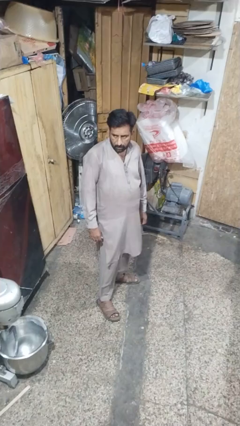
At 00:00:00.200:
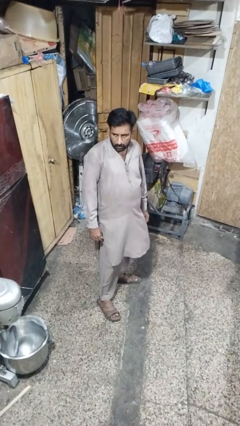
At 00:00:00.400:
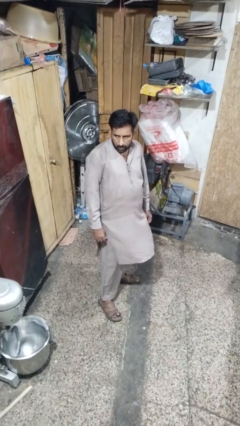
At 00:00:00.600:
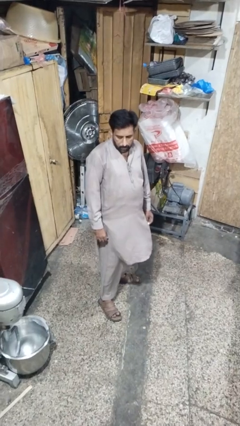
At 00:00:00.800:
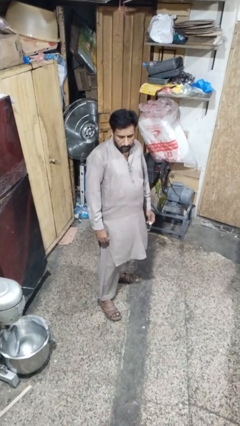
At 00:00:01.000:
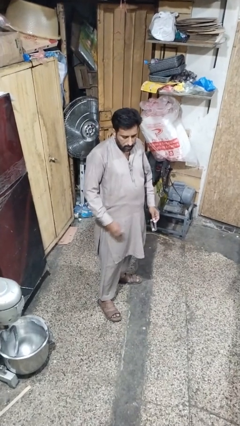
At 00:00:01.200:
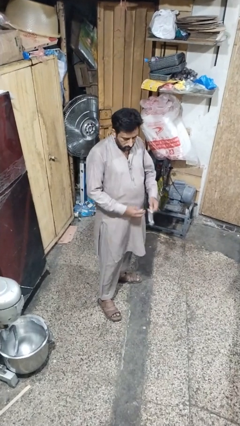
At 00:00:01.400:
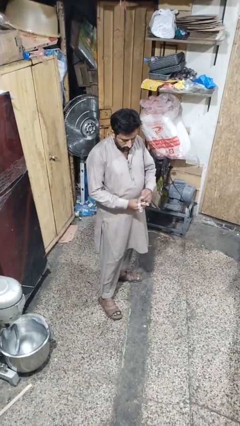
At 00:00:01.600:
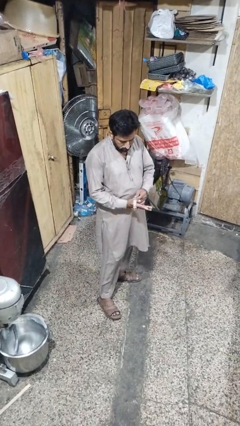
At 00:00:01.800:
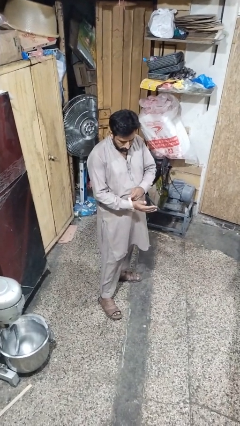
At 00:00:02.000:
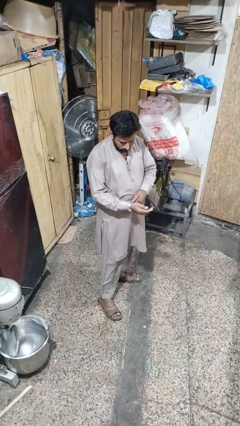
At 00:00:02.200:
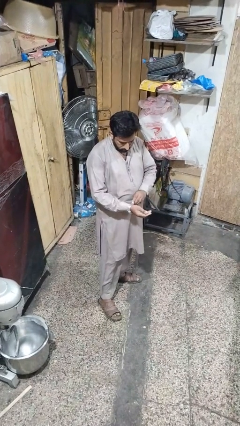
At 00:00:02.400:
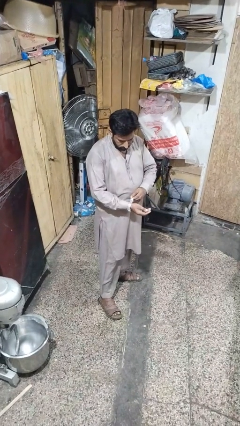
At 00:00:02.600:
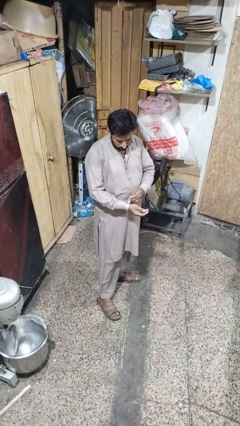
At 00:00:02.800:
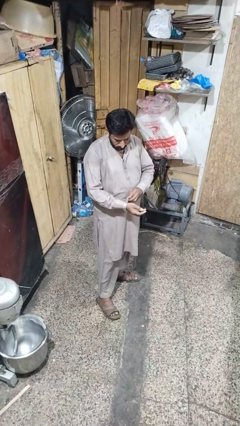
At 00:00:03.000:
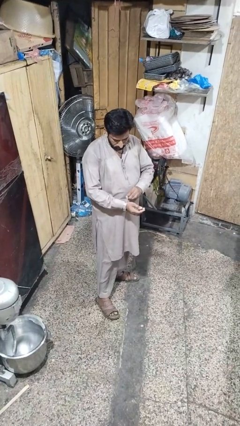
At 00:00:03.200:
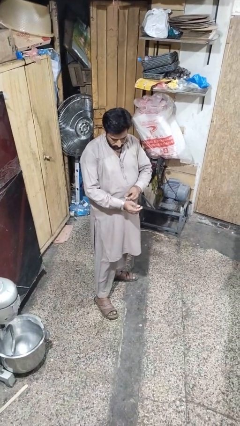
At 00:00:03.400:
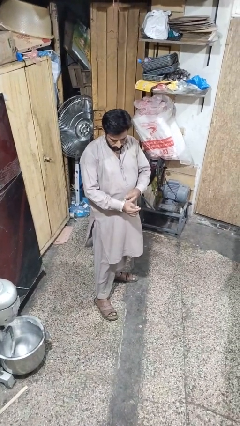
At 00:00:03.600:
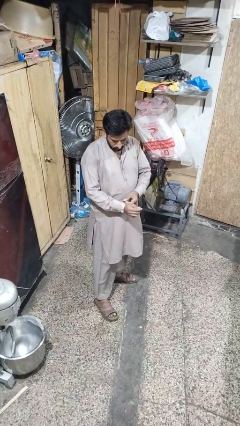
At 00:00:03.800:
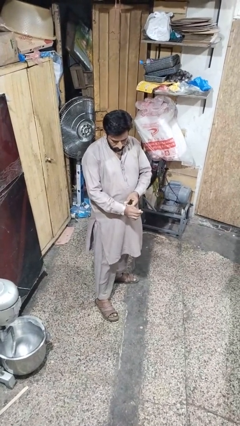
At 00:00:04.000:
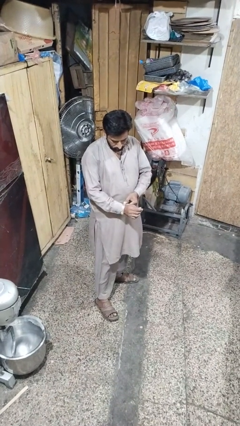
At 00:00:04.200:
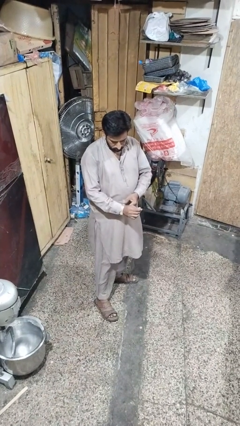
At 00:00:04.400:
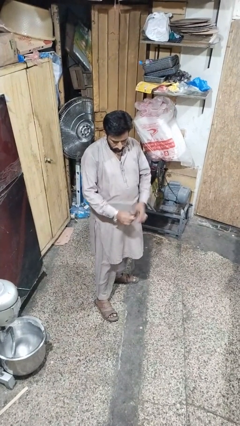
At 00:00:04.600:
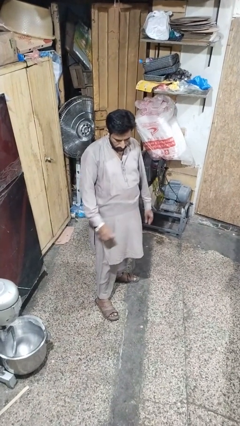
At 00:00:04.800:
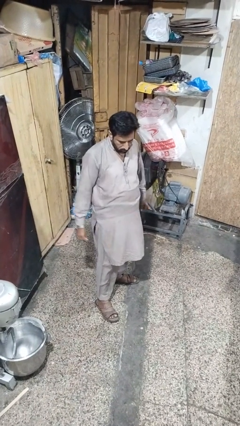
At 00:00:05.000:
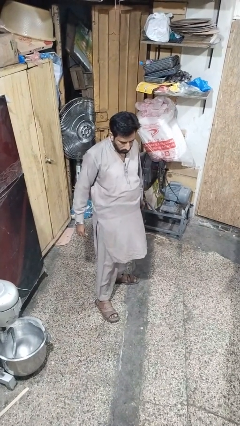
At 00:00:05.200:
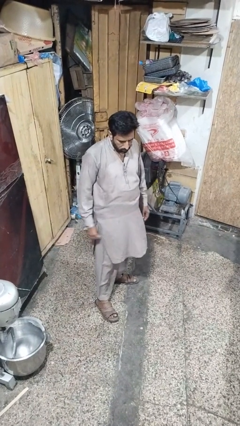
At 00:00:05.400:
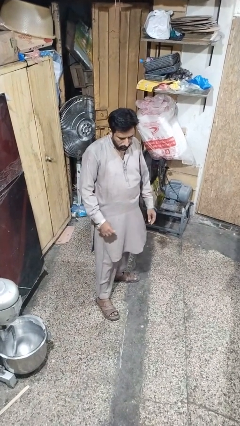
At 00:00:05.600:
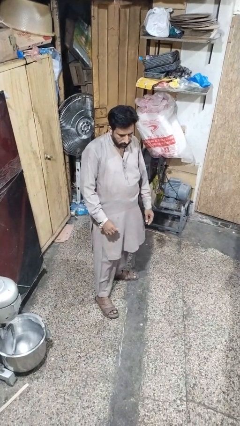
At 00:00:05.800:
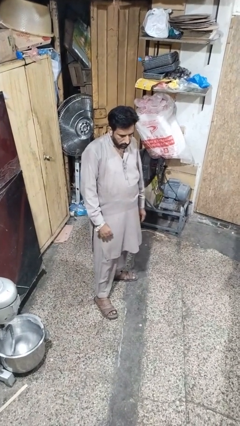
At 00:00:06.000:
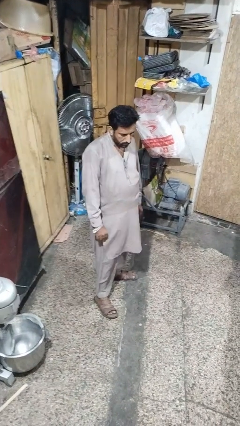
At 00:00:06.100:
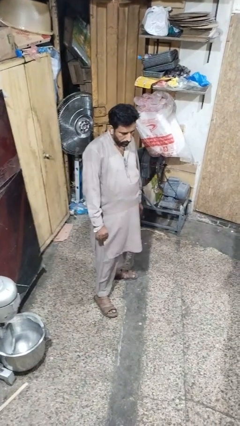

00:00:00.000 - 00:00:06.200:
person puts on wristwatch

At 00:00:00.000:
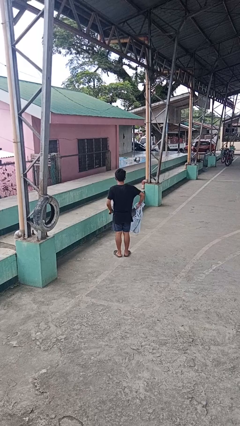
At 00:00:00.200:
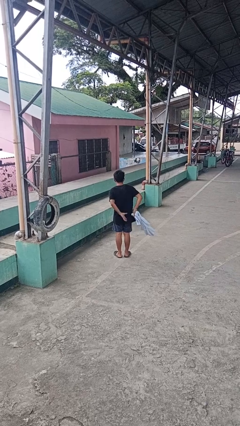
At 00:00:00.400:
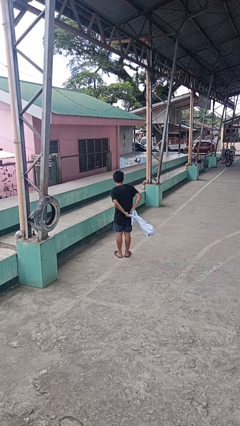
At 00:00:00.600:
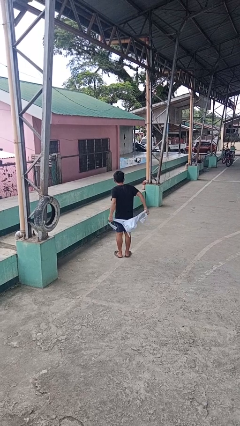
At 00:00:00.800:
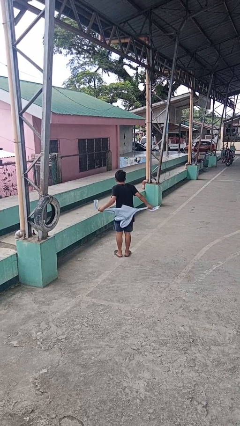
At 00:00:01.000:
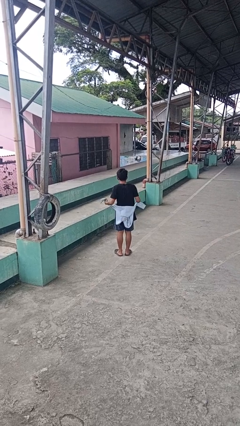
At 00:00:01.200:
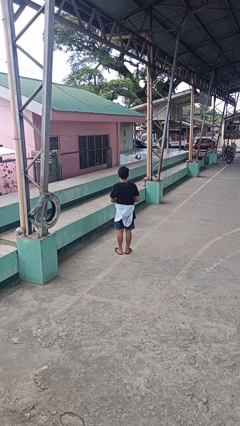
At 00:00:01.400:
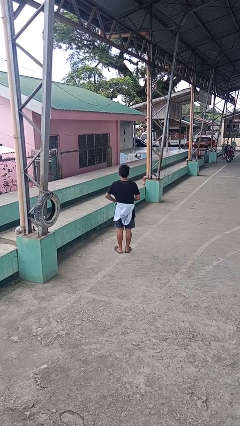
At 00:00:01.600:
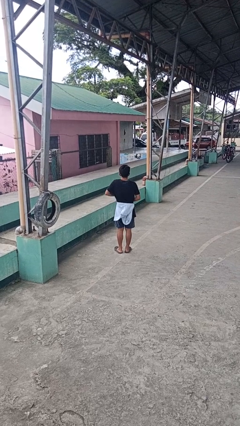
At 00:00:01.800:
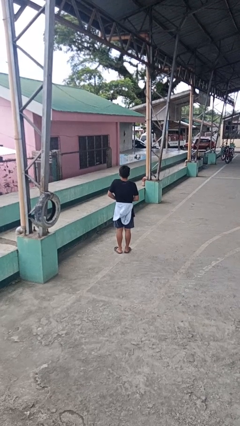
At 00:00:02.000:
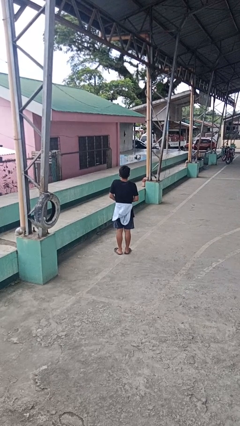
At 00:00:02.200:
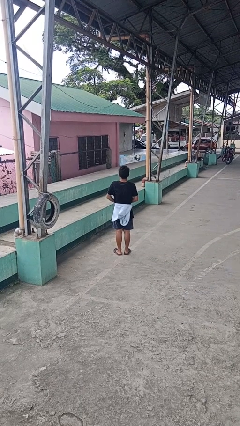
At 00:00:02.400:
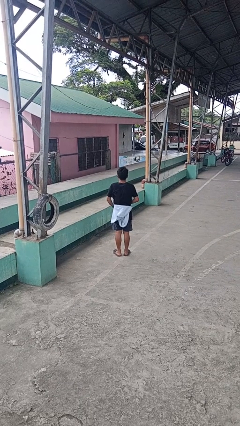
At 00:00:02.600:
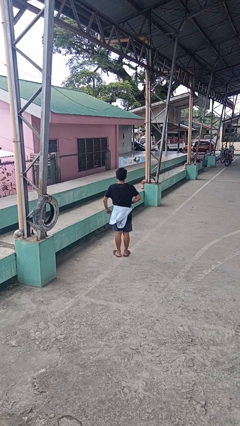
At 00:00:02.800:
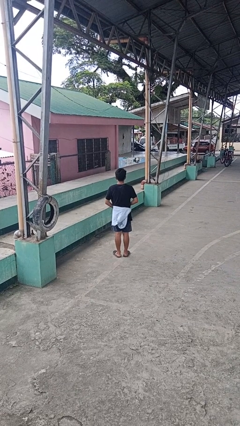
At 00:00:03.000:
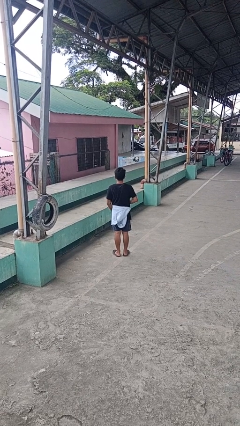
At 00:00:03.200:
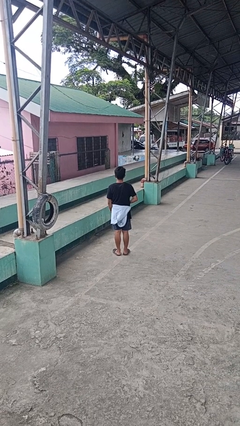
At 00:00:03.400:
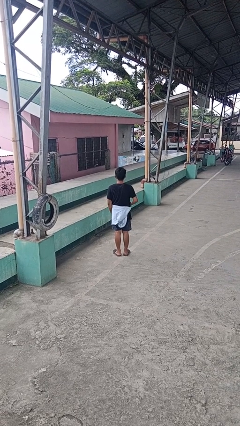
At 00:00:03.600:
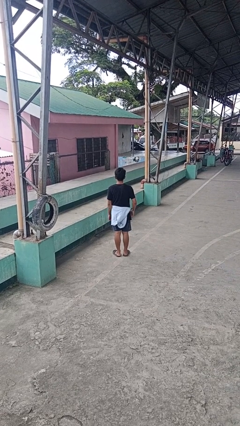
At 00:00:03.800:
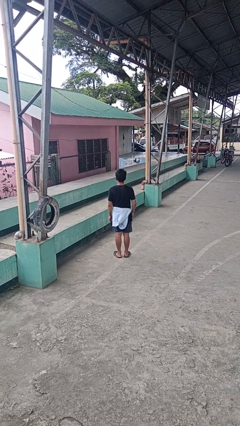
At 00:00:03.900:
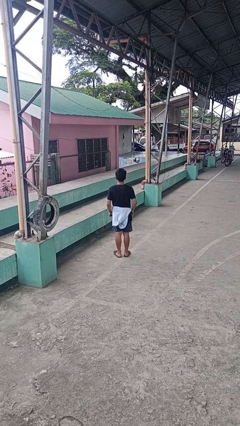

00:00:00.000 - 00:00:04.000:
person ties jacket around waist

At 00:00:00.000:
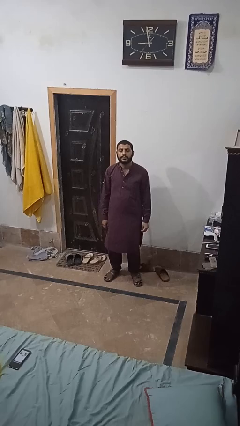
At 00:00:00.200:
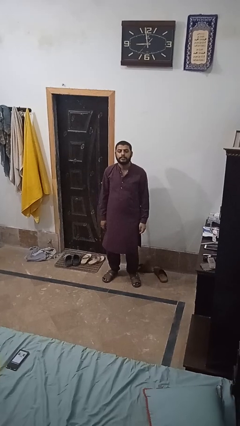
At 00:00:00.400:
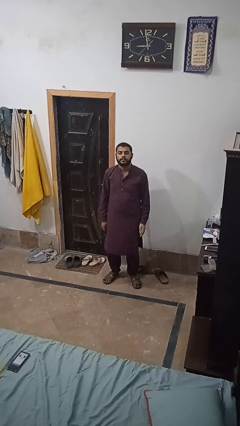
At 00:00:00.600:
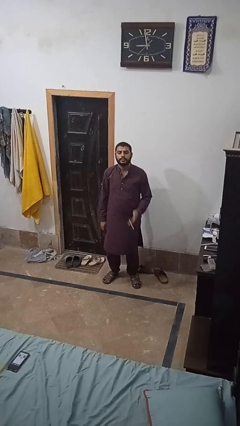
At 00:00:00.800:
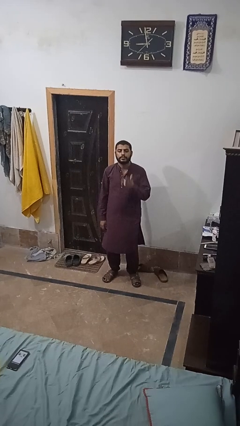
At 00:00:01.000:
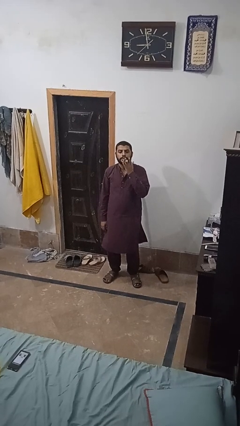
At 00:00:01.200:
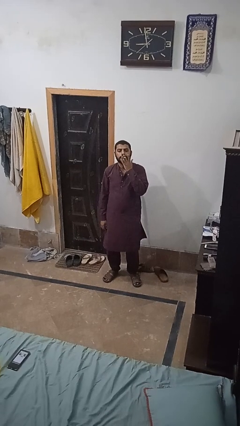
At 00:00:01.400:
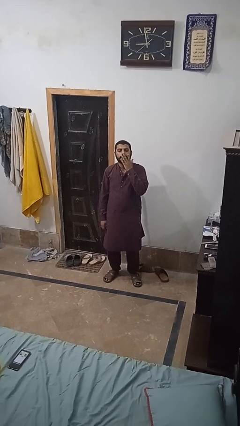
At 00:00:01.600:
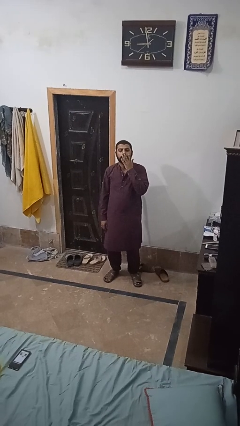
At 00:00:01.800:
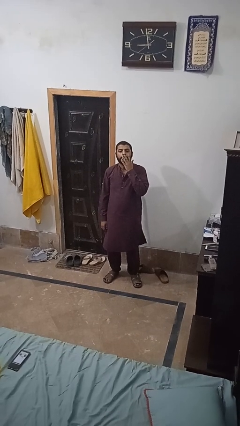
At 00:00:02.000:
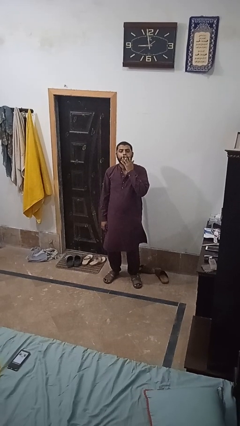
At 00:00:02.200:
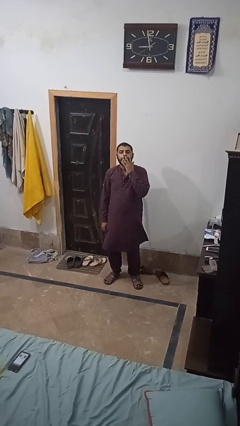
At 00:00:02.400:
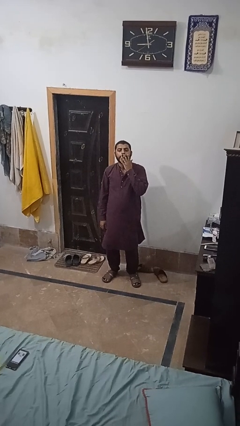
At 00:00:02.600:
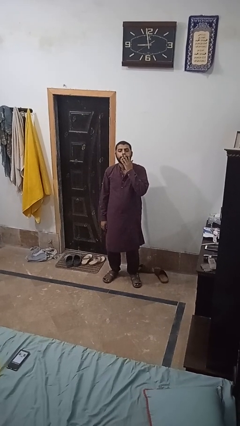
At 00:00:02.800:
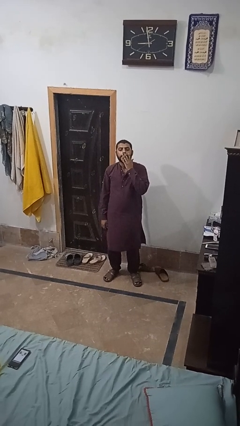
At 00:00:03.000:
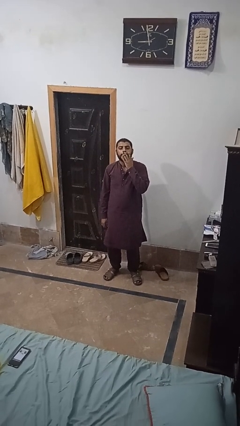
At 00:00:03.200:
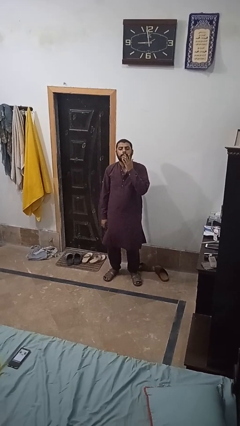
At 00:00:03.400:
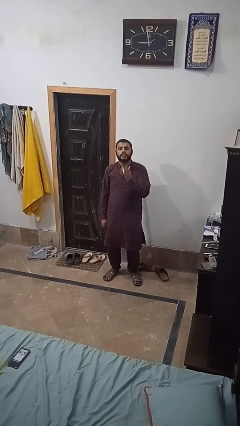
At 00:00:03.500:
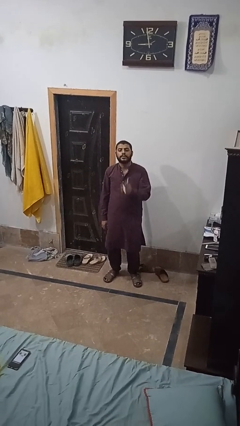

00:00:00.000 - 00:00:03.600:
person vapes

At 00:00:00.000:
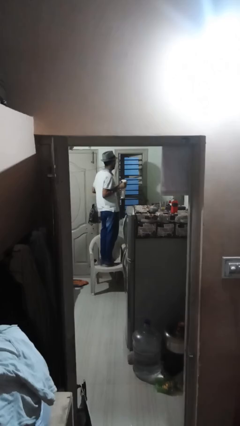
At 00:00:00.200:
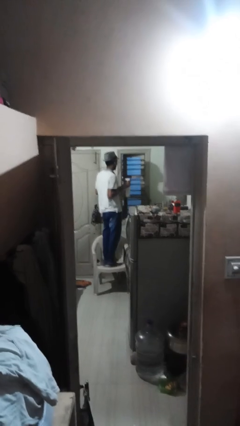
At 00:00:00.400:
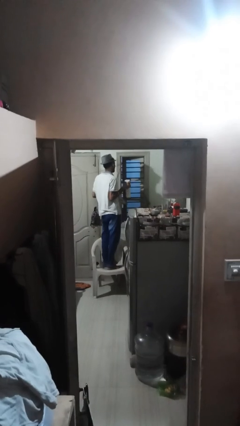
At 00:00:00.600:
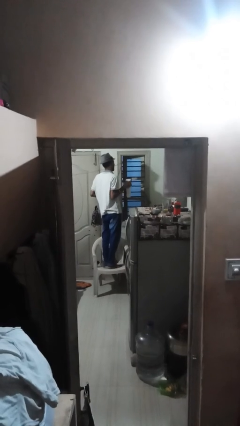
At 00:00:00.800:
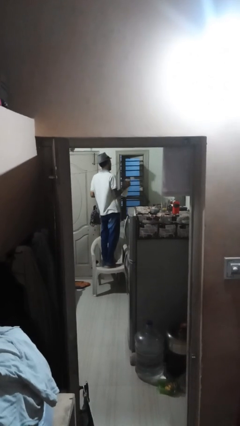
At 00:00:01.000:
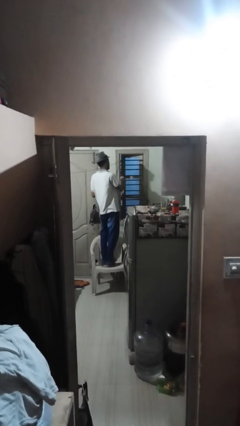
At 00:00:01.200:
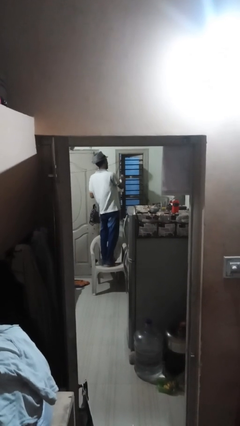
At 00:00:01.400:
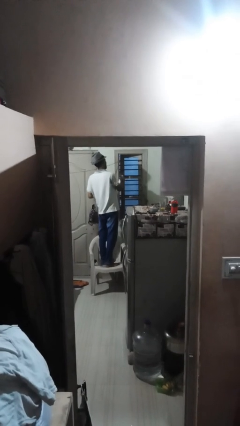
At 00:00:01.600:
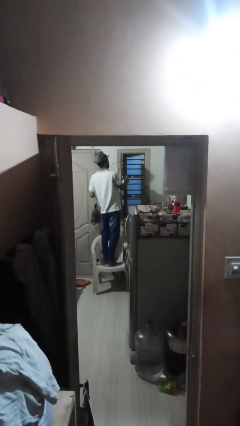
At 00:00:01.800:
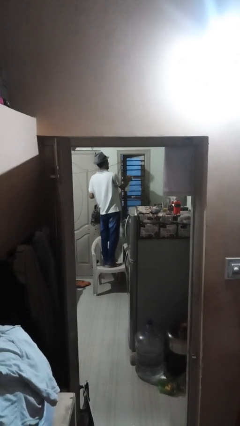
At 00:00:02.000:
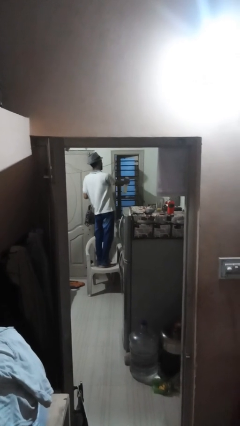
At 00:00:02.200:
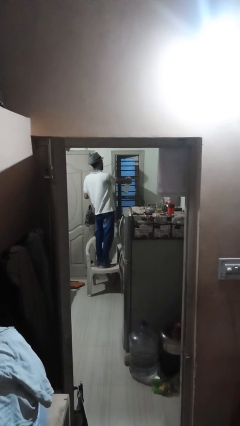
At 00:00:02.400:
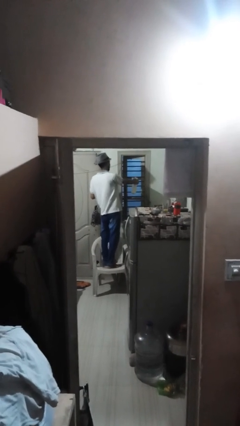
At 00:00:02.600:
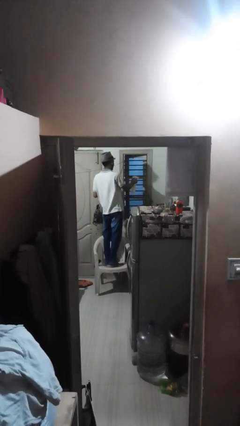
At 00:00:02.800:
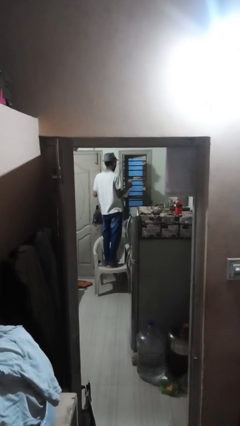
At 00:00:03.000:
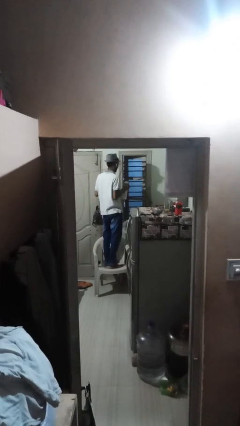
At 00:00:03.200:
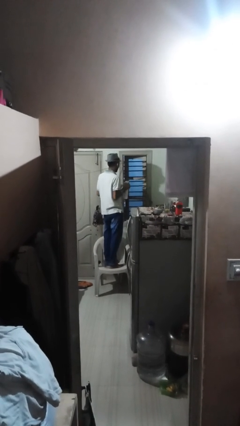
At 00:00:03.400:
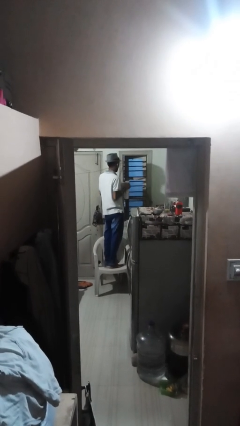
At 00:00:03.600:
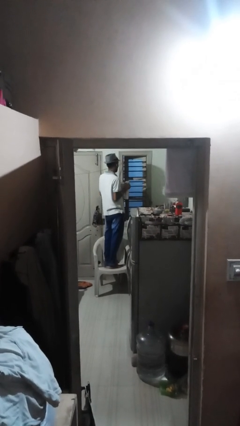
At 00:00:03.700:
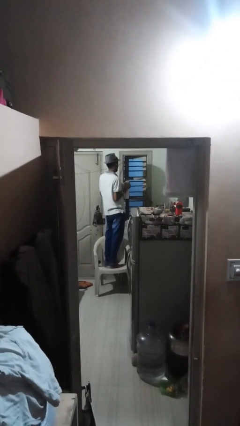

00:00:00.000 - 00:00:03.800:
person sprays from bottle
